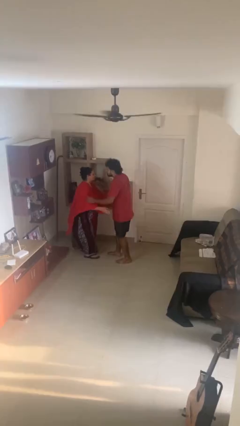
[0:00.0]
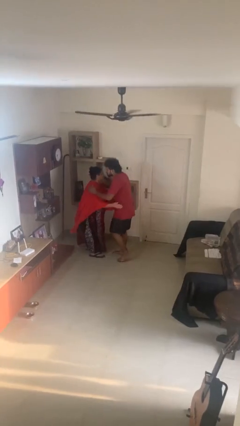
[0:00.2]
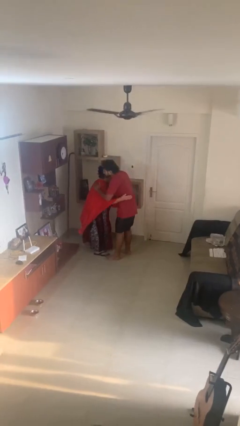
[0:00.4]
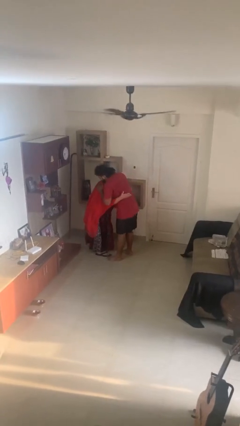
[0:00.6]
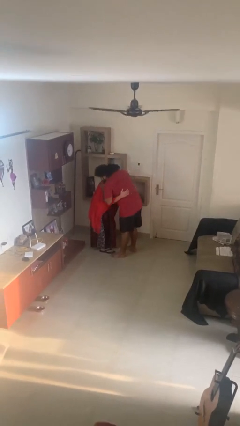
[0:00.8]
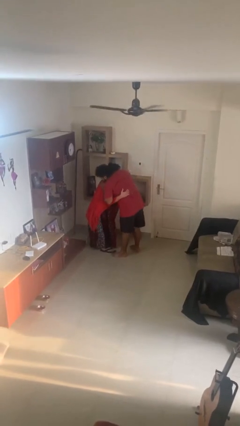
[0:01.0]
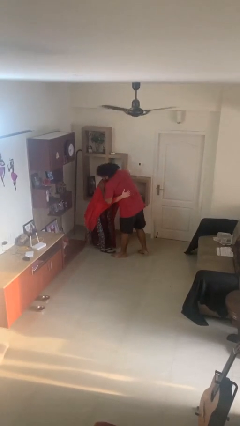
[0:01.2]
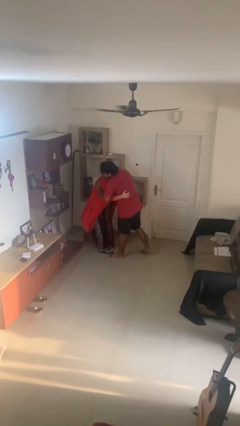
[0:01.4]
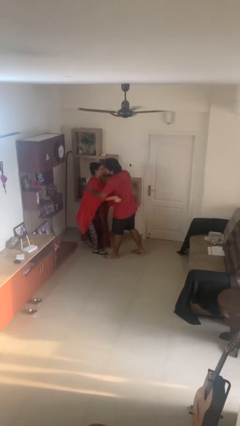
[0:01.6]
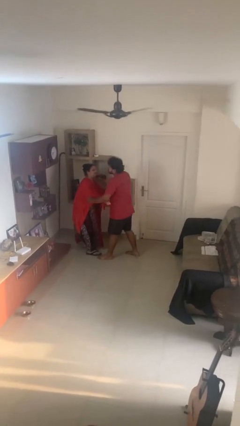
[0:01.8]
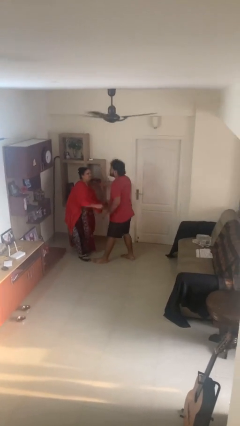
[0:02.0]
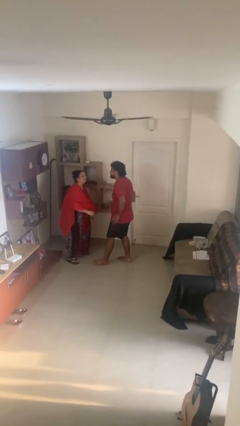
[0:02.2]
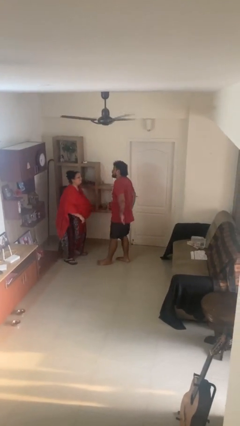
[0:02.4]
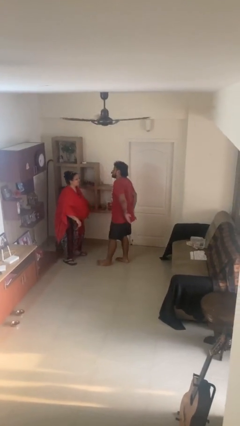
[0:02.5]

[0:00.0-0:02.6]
person embraces person

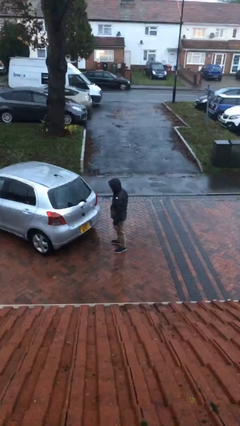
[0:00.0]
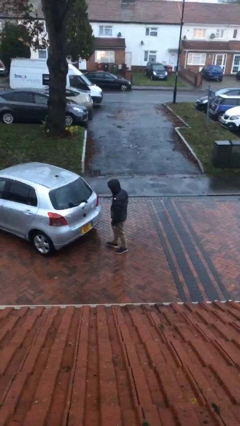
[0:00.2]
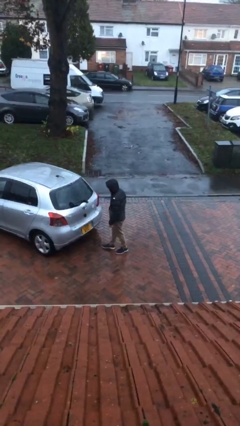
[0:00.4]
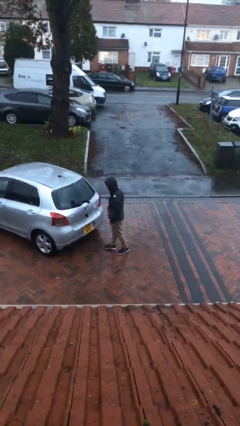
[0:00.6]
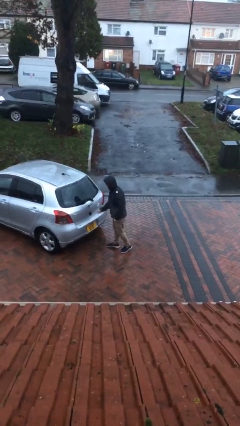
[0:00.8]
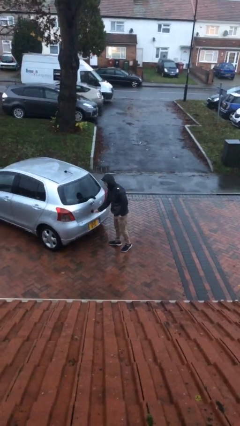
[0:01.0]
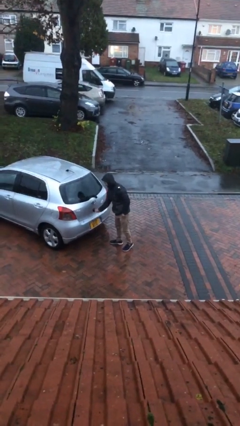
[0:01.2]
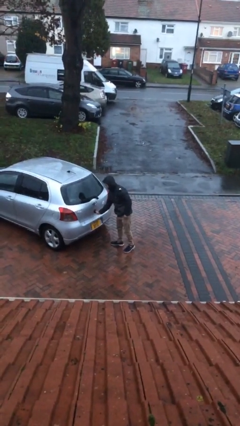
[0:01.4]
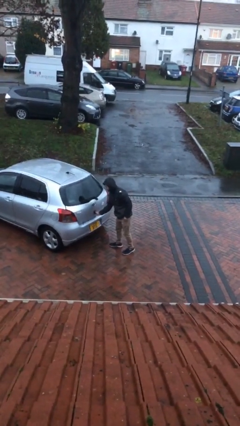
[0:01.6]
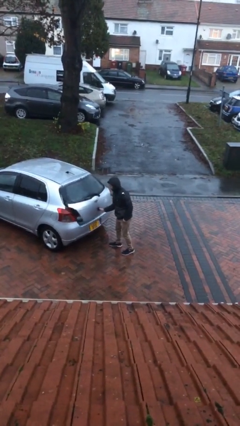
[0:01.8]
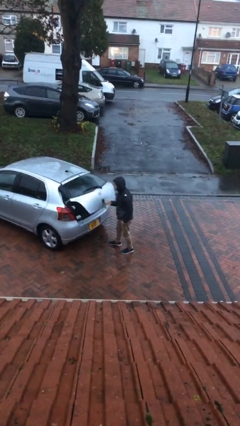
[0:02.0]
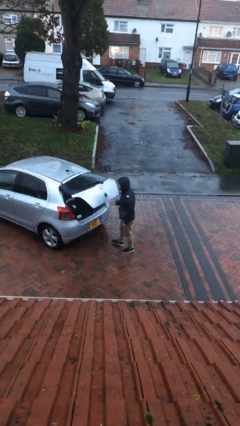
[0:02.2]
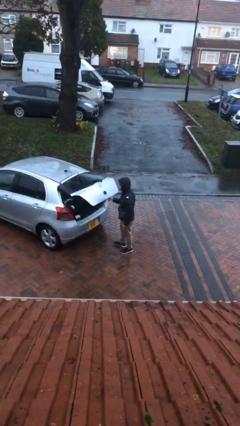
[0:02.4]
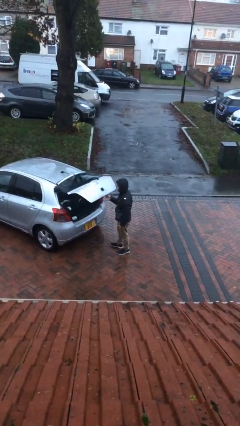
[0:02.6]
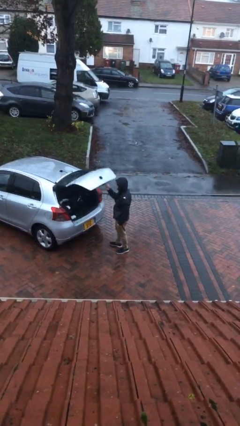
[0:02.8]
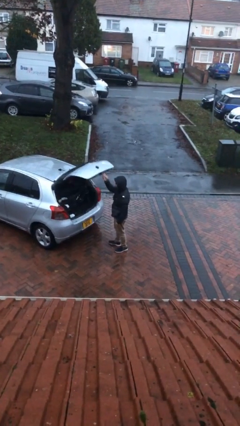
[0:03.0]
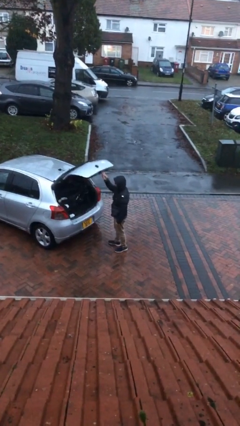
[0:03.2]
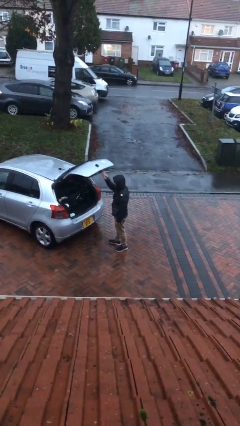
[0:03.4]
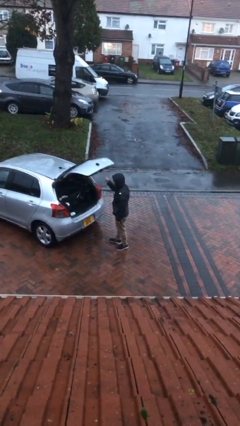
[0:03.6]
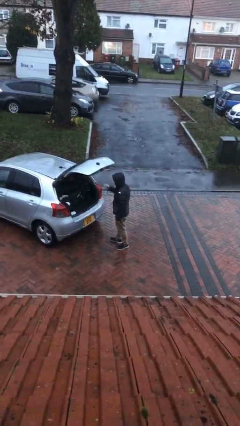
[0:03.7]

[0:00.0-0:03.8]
person opens car trunk

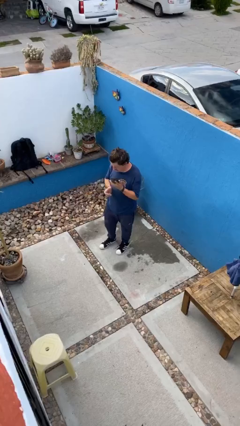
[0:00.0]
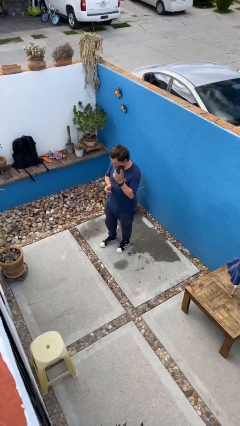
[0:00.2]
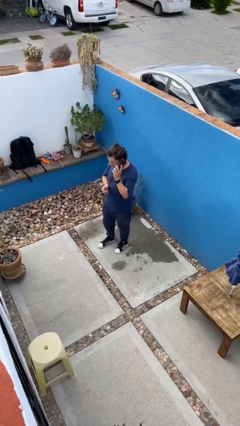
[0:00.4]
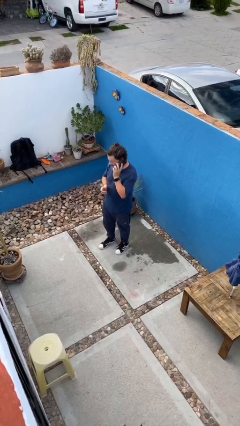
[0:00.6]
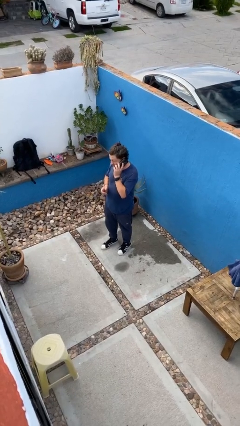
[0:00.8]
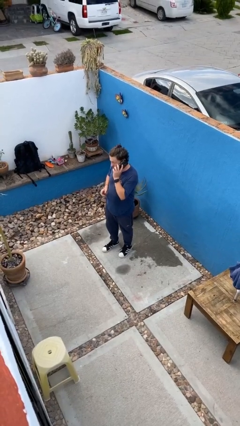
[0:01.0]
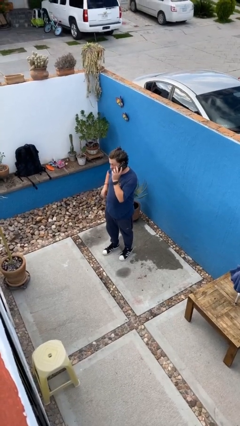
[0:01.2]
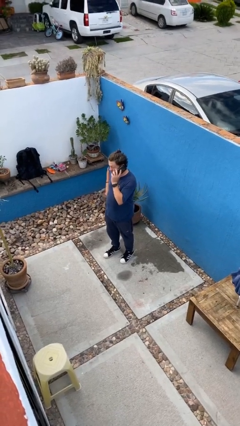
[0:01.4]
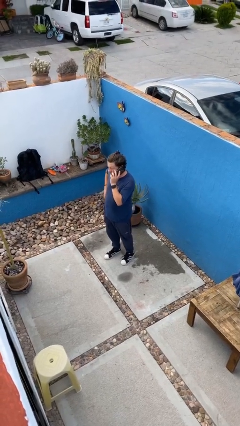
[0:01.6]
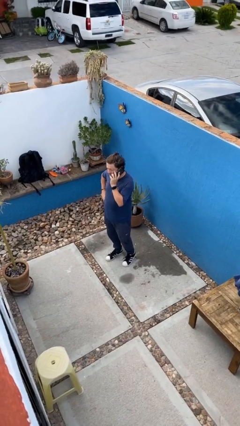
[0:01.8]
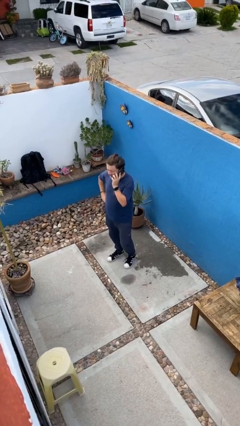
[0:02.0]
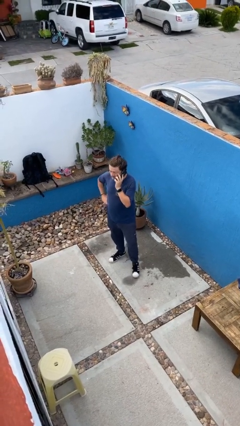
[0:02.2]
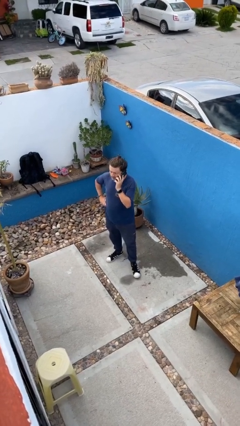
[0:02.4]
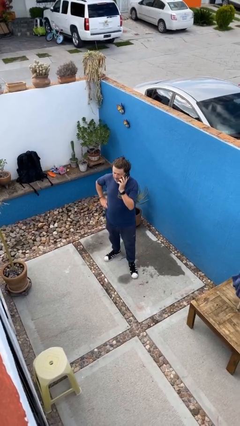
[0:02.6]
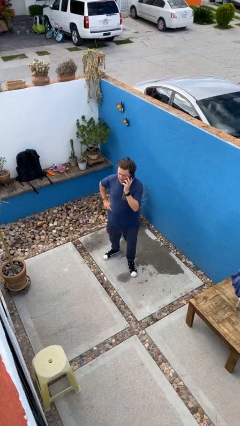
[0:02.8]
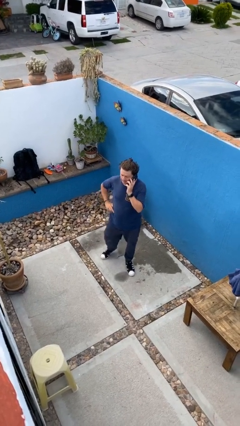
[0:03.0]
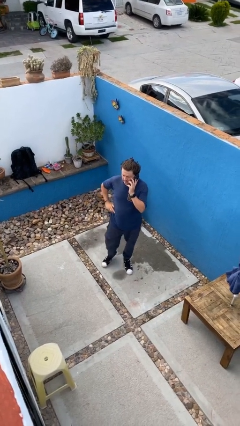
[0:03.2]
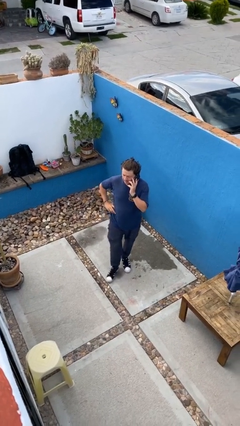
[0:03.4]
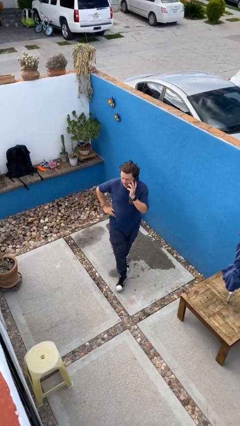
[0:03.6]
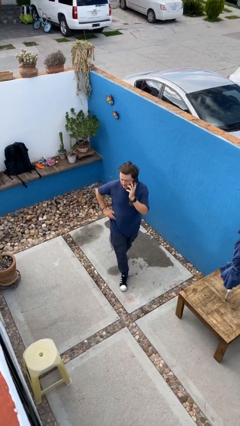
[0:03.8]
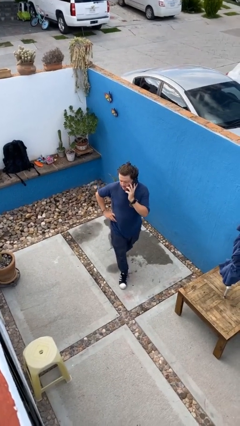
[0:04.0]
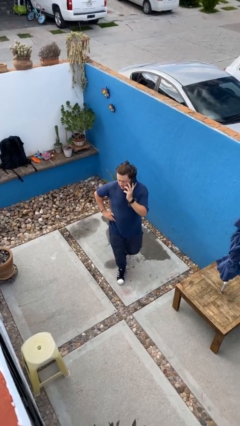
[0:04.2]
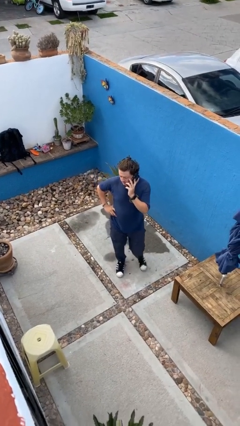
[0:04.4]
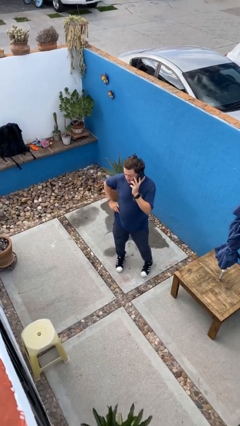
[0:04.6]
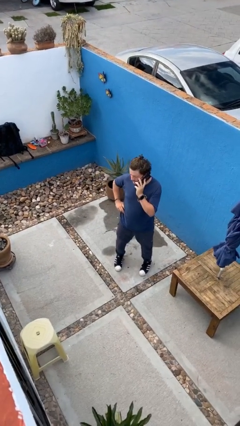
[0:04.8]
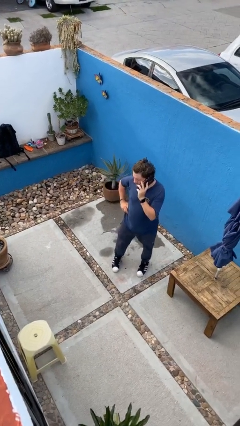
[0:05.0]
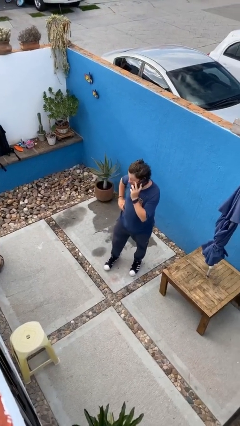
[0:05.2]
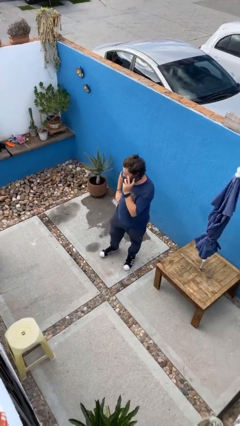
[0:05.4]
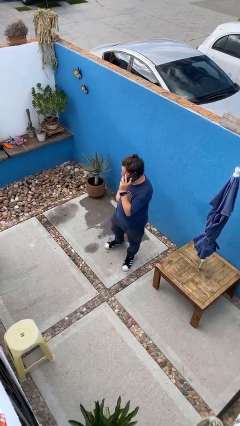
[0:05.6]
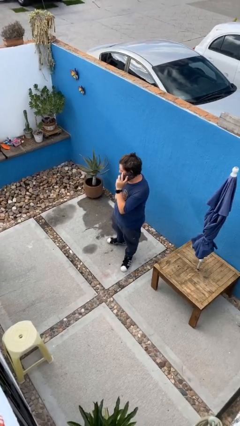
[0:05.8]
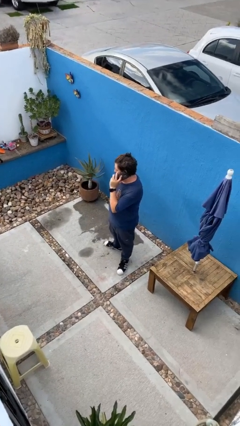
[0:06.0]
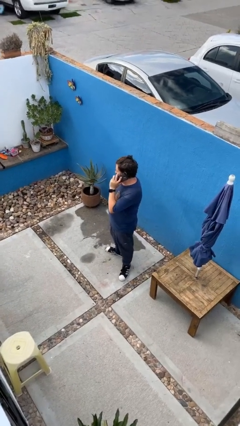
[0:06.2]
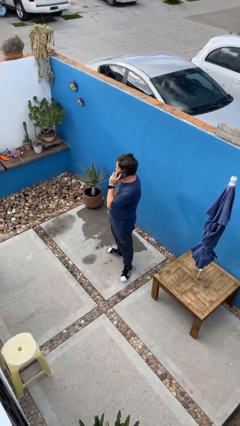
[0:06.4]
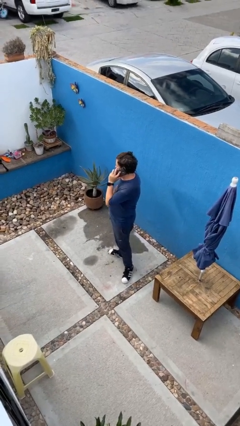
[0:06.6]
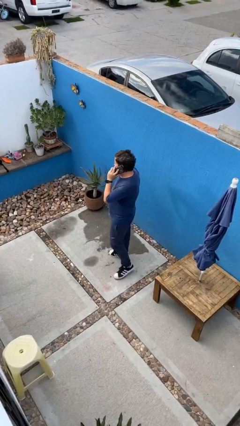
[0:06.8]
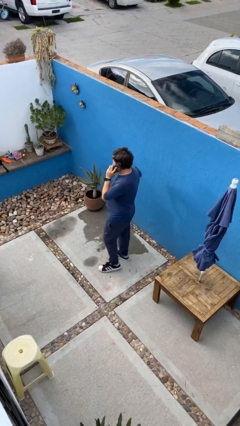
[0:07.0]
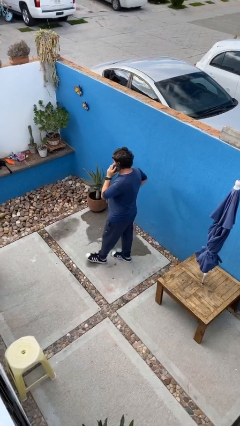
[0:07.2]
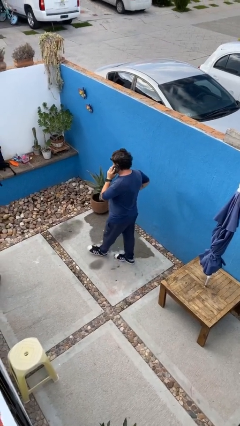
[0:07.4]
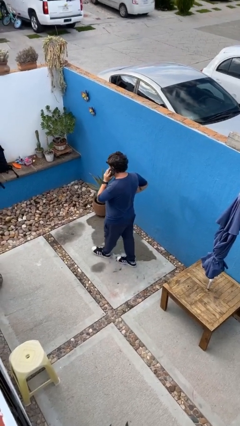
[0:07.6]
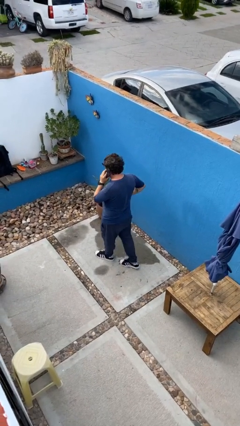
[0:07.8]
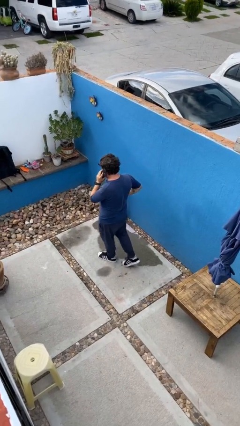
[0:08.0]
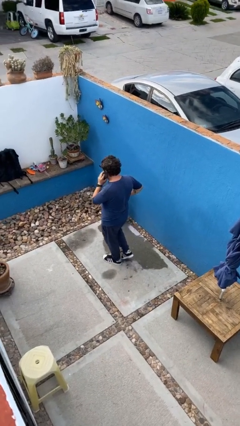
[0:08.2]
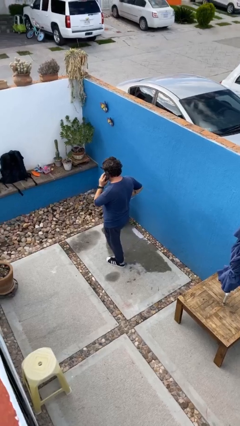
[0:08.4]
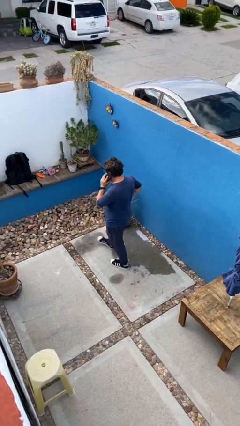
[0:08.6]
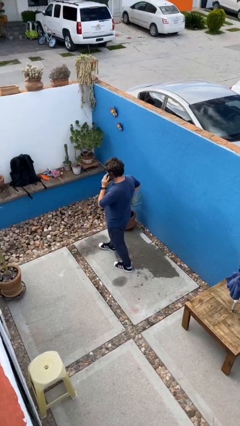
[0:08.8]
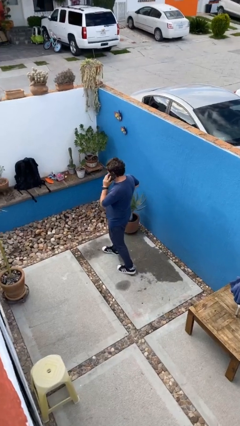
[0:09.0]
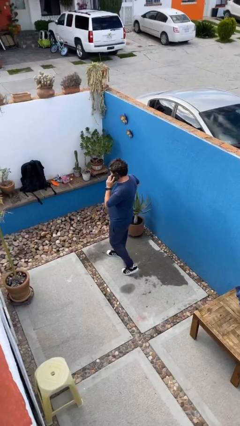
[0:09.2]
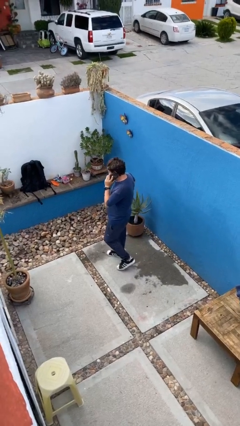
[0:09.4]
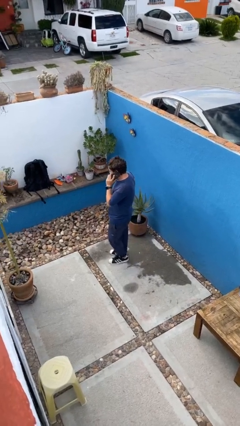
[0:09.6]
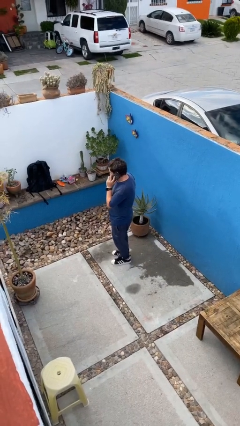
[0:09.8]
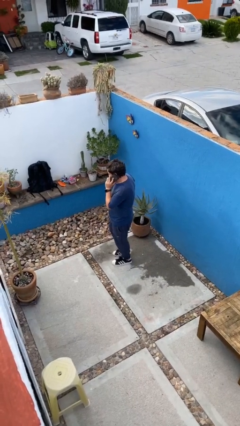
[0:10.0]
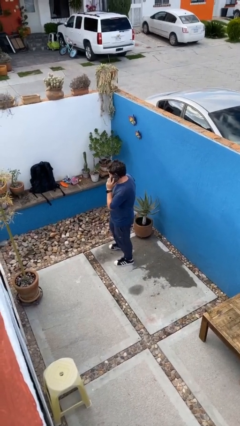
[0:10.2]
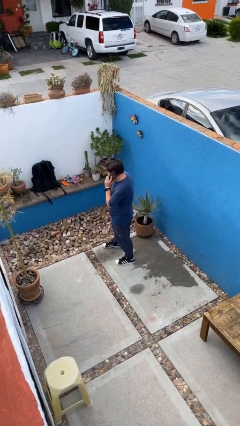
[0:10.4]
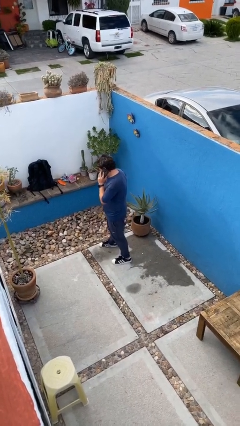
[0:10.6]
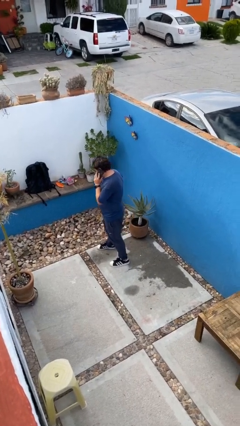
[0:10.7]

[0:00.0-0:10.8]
person talks on phone

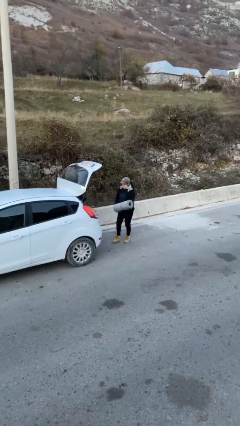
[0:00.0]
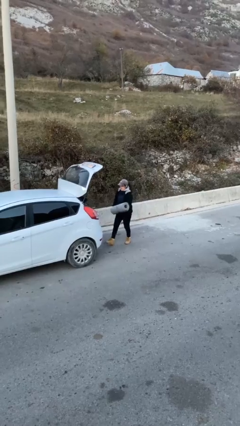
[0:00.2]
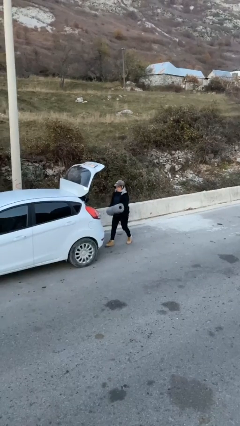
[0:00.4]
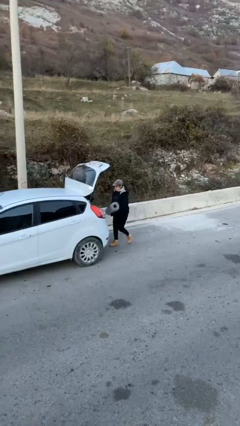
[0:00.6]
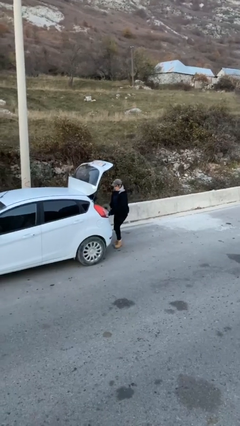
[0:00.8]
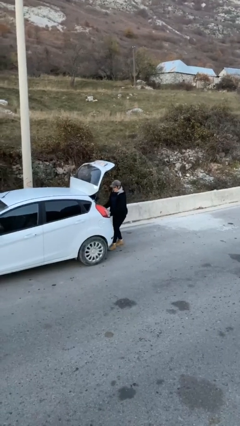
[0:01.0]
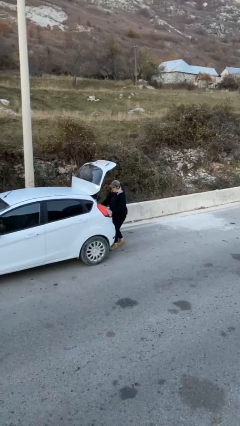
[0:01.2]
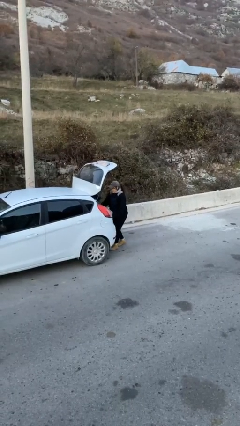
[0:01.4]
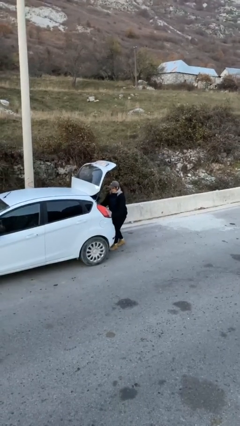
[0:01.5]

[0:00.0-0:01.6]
person loads car
